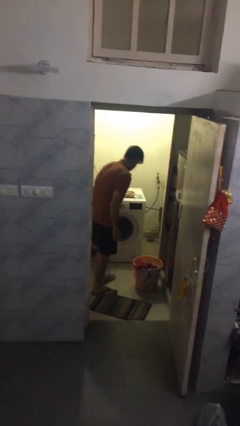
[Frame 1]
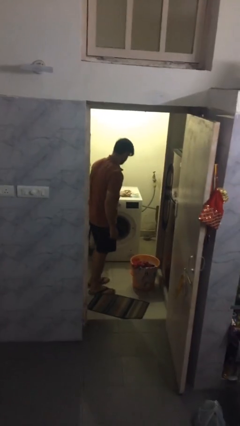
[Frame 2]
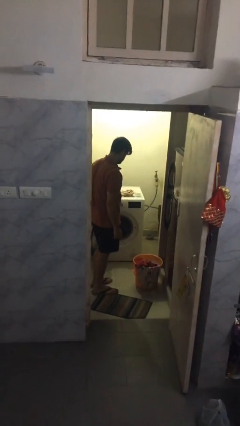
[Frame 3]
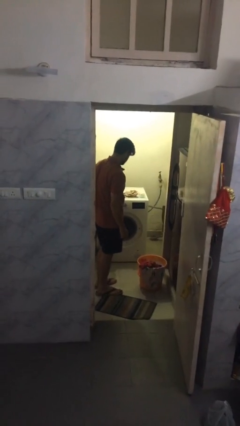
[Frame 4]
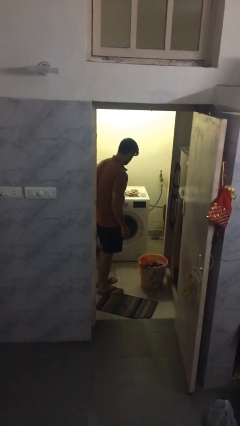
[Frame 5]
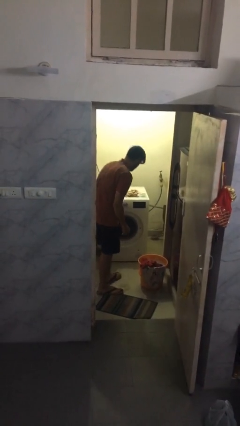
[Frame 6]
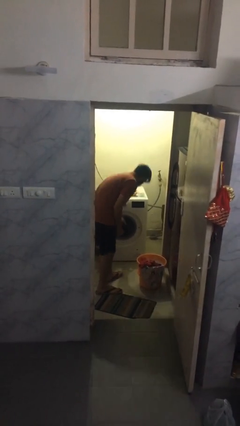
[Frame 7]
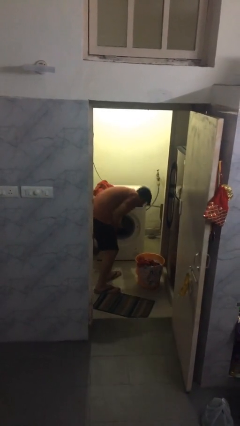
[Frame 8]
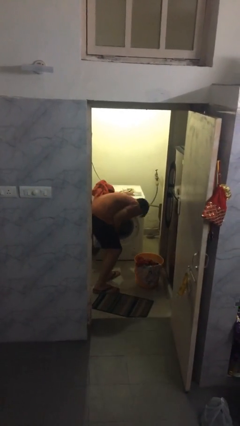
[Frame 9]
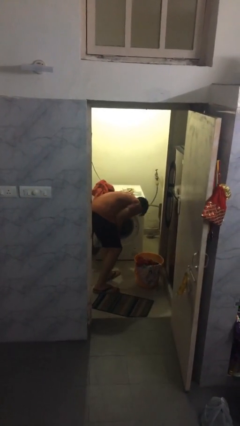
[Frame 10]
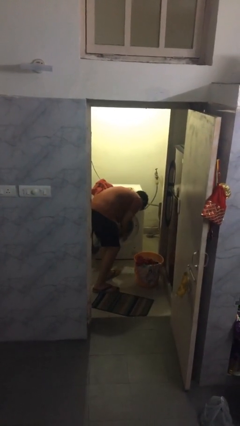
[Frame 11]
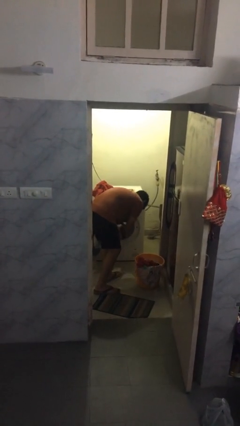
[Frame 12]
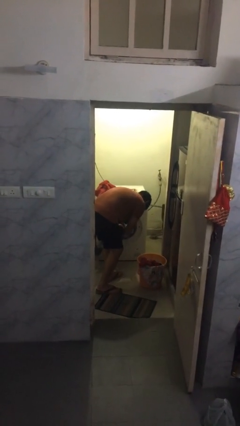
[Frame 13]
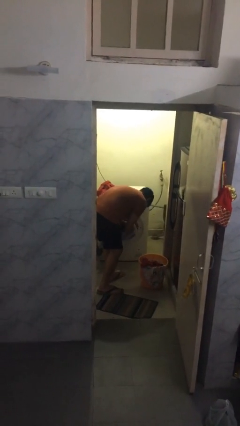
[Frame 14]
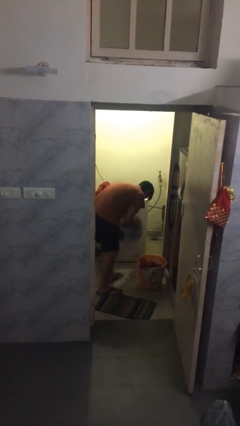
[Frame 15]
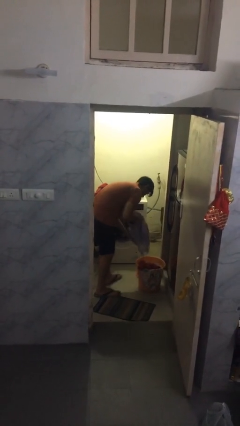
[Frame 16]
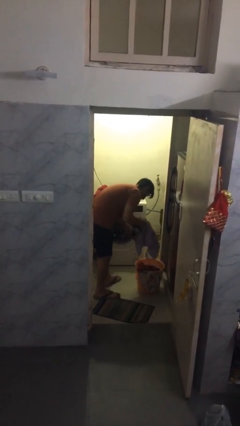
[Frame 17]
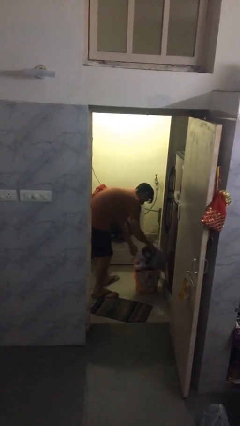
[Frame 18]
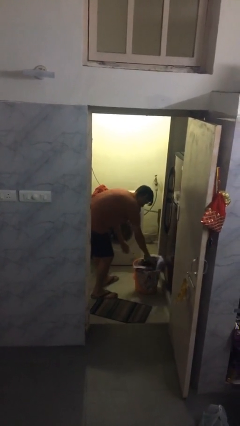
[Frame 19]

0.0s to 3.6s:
person unloads dryer

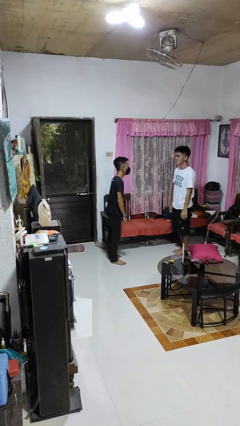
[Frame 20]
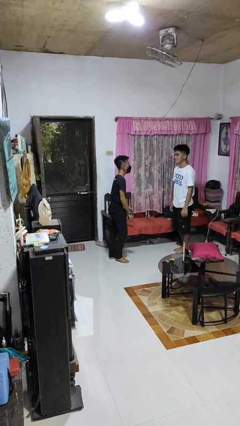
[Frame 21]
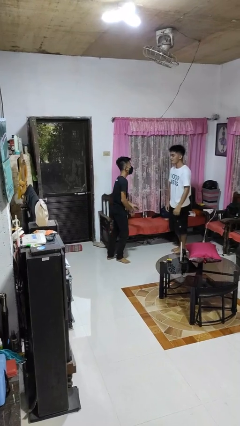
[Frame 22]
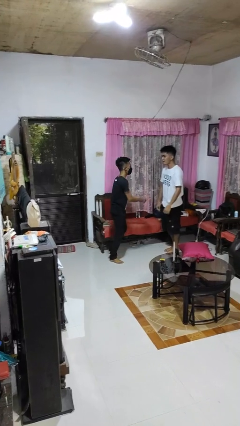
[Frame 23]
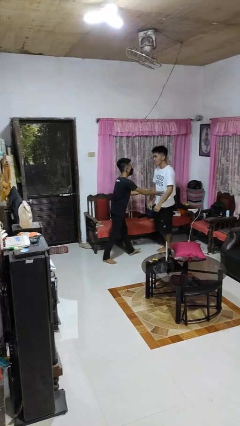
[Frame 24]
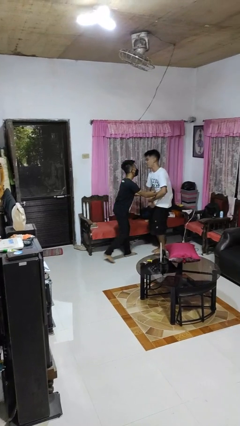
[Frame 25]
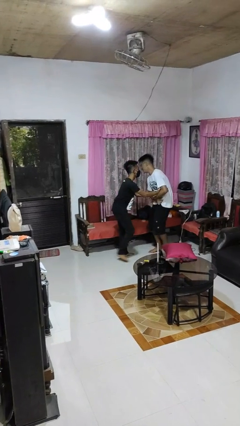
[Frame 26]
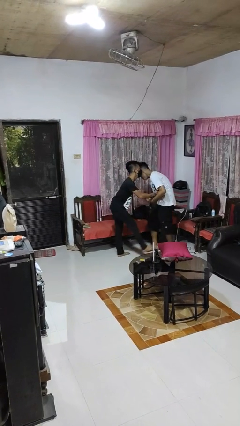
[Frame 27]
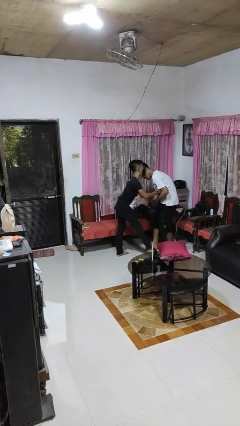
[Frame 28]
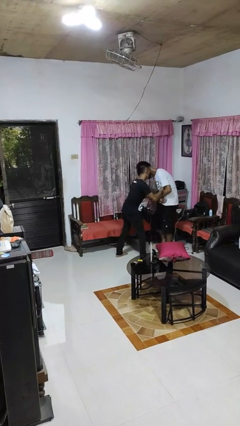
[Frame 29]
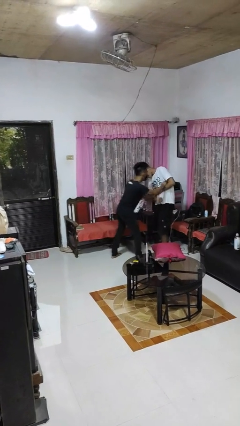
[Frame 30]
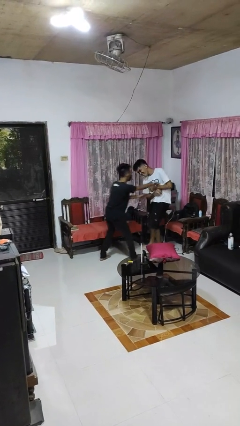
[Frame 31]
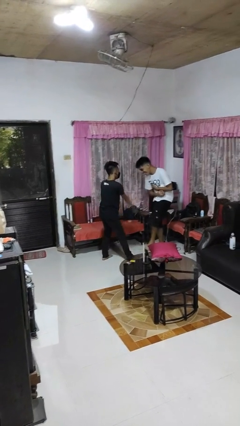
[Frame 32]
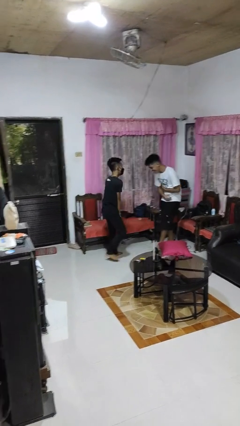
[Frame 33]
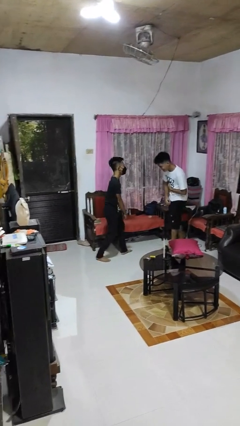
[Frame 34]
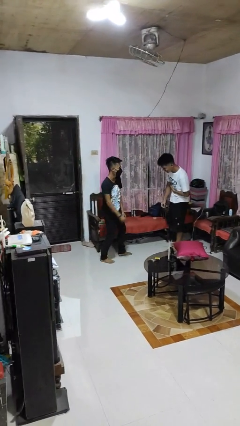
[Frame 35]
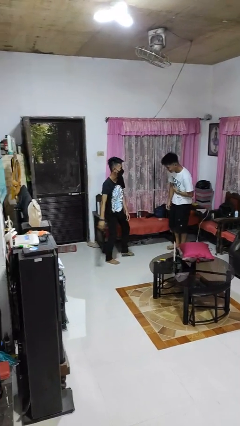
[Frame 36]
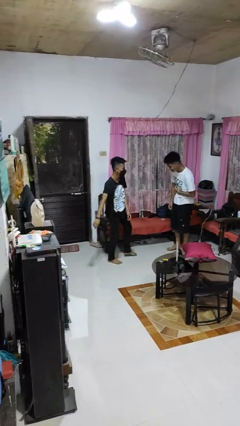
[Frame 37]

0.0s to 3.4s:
person tickles person

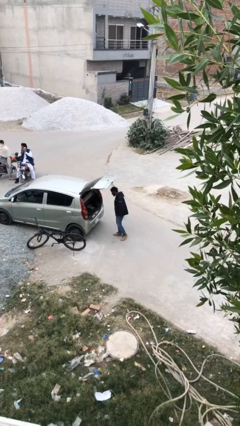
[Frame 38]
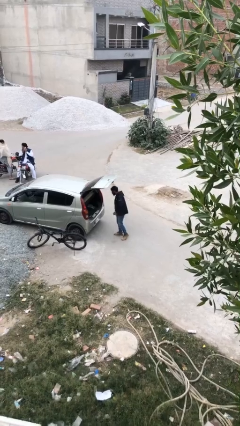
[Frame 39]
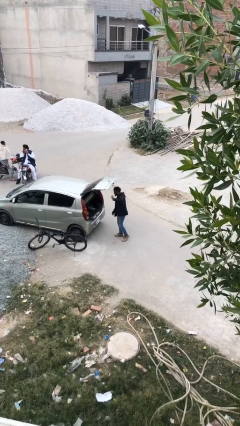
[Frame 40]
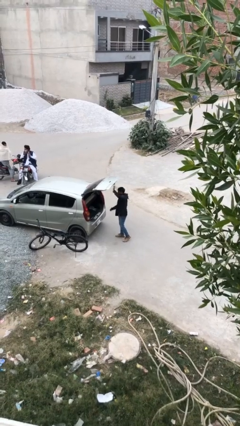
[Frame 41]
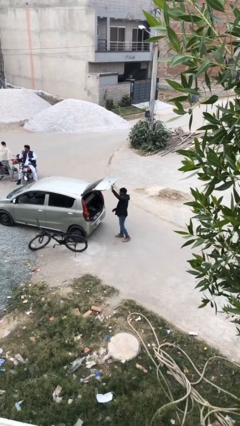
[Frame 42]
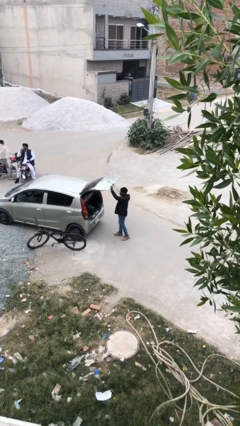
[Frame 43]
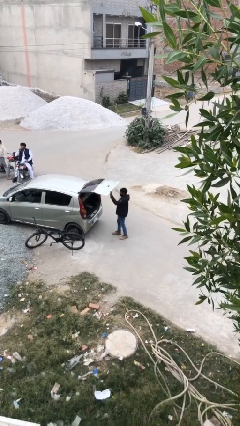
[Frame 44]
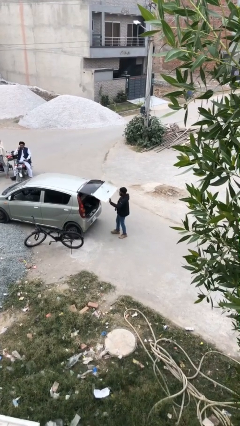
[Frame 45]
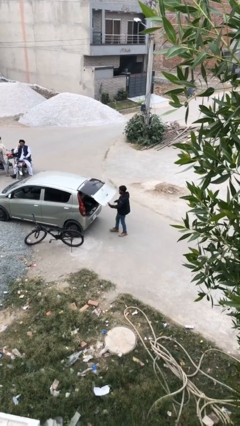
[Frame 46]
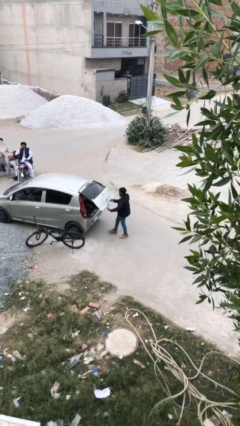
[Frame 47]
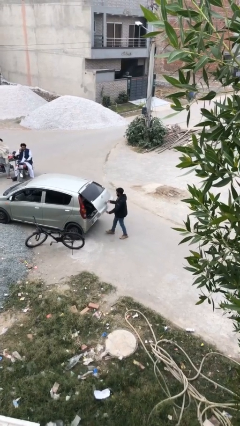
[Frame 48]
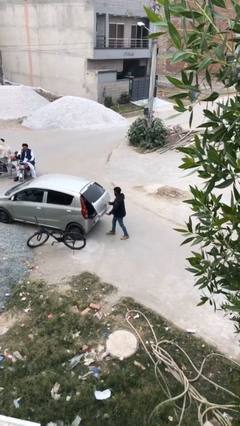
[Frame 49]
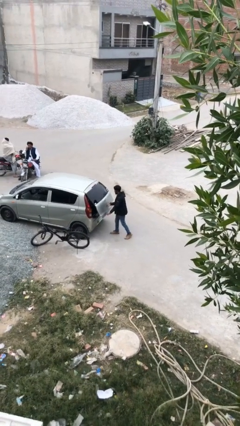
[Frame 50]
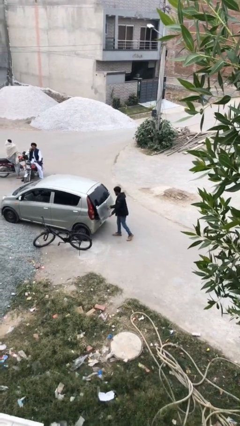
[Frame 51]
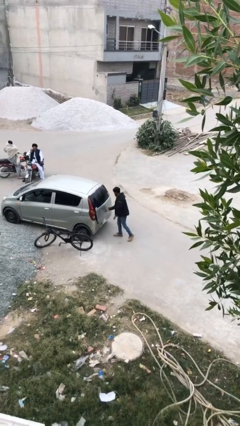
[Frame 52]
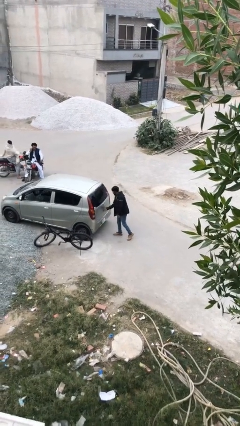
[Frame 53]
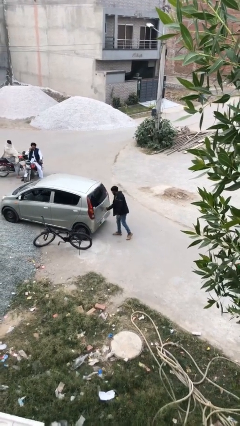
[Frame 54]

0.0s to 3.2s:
person closes car trunk

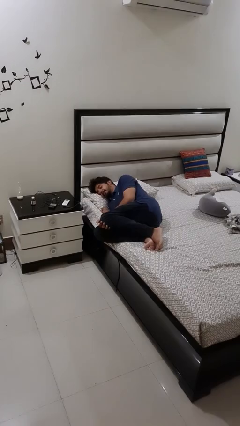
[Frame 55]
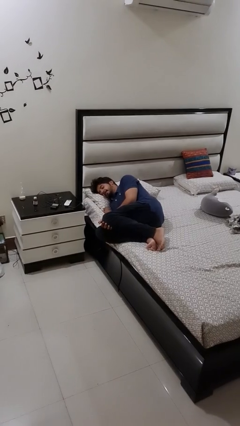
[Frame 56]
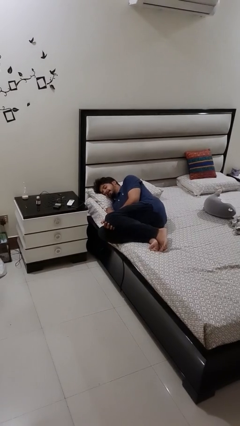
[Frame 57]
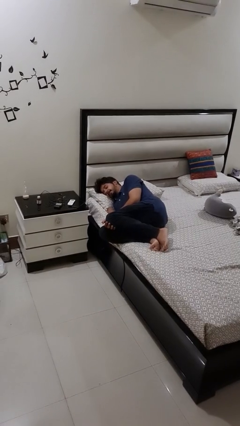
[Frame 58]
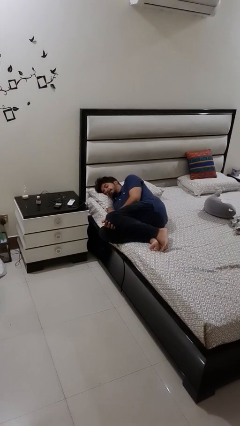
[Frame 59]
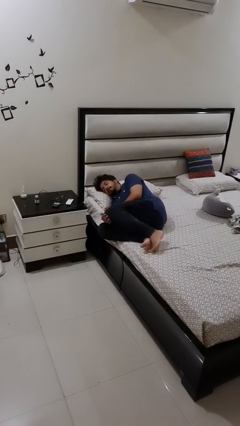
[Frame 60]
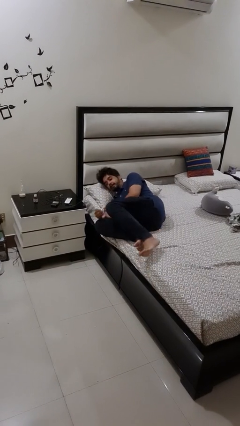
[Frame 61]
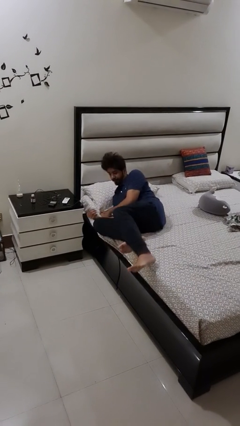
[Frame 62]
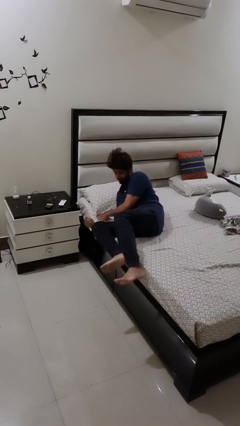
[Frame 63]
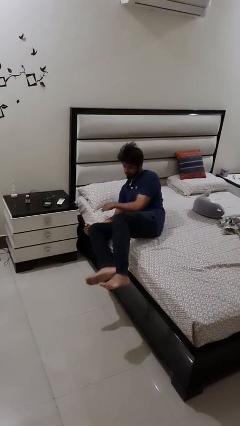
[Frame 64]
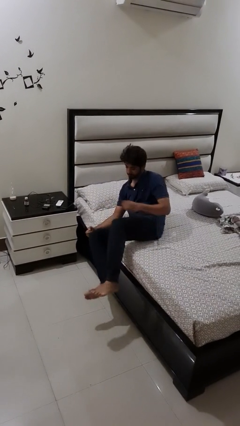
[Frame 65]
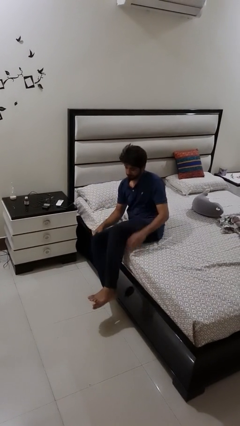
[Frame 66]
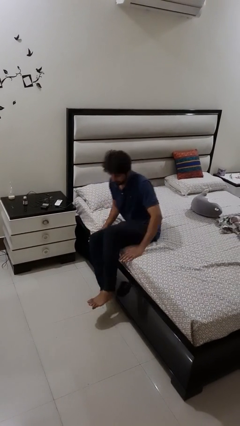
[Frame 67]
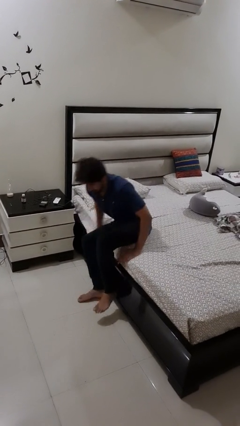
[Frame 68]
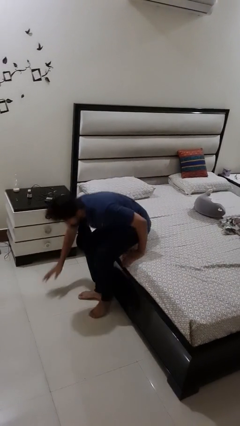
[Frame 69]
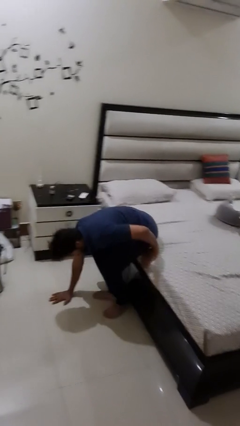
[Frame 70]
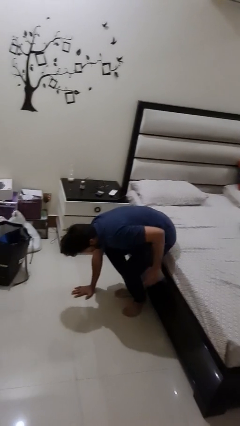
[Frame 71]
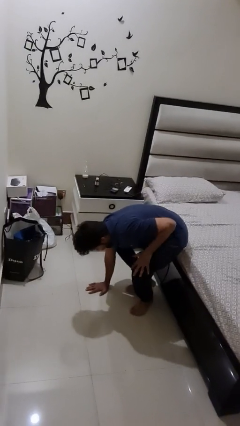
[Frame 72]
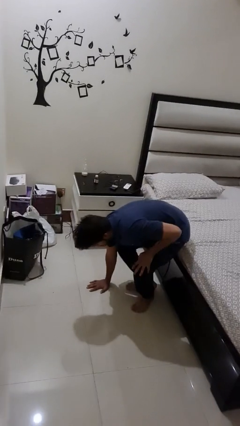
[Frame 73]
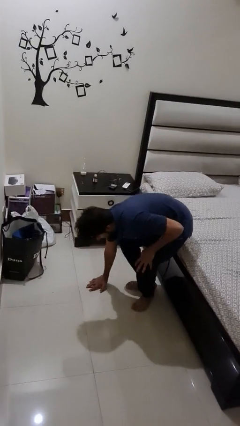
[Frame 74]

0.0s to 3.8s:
person falls from bed

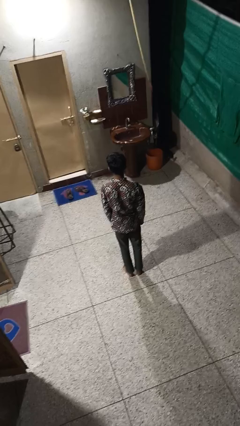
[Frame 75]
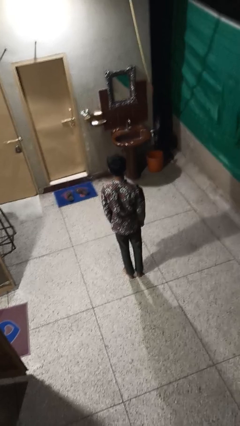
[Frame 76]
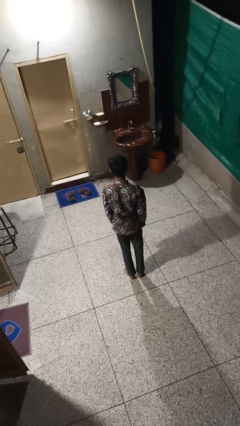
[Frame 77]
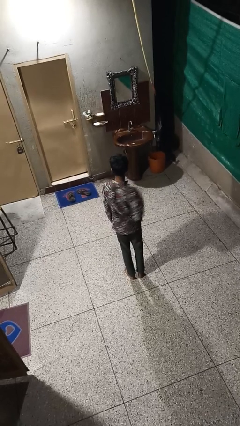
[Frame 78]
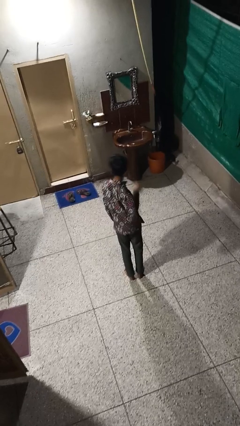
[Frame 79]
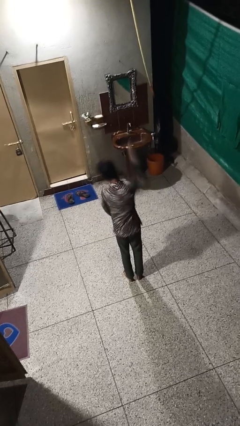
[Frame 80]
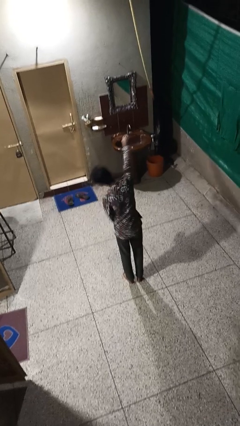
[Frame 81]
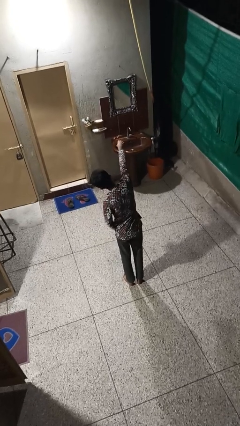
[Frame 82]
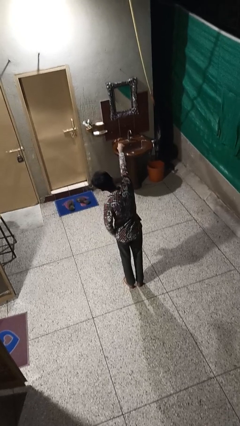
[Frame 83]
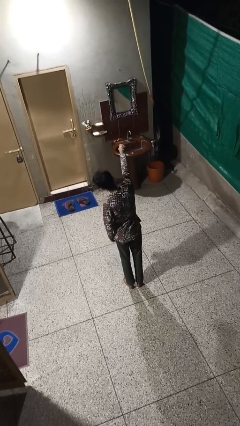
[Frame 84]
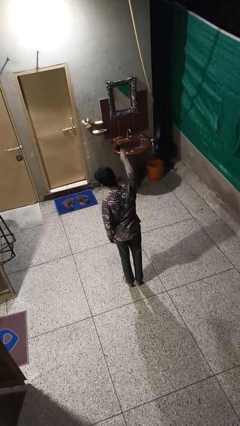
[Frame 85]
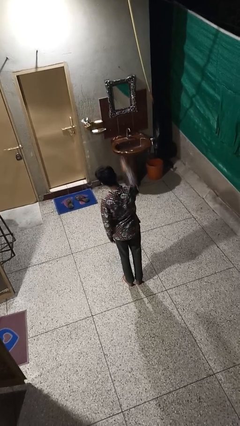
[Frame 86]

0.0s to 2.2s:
person punches

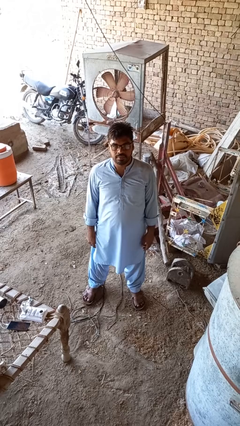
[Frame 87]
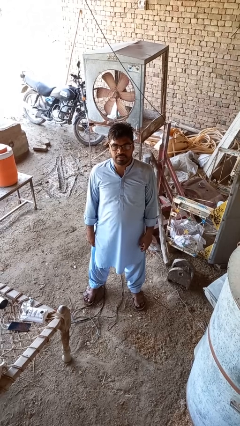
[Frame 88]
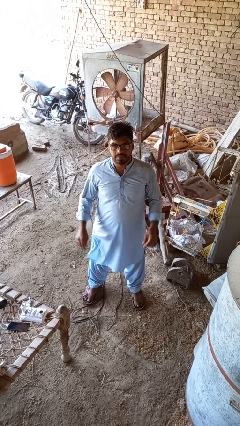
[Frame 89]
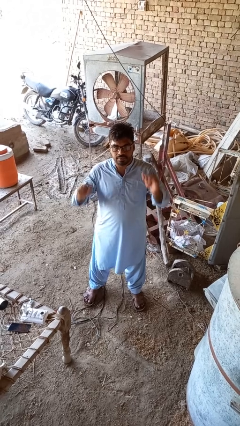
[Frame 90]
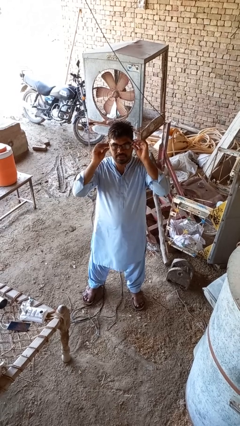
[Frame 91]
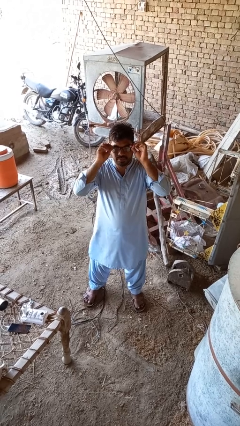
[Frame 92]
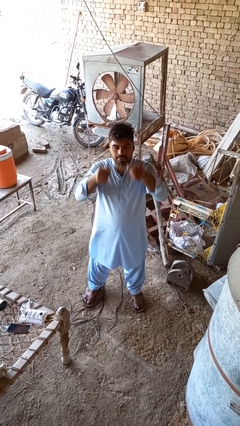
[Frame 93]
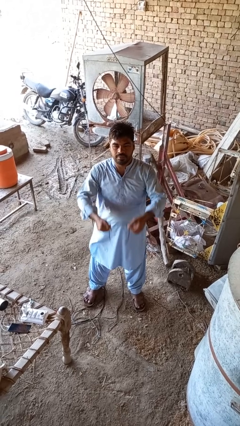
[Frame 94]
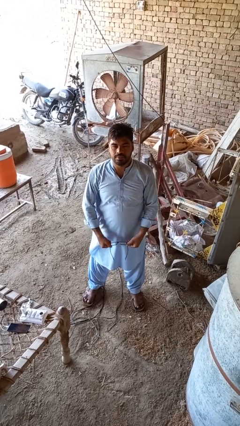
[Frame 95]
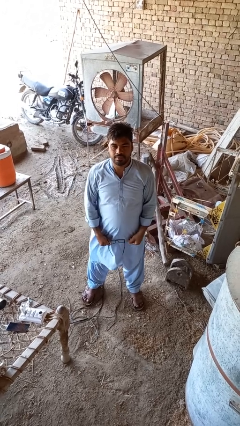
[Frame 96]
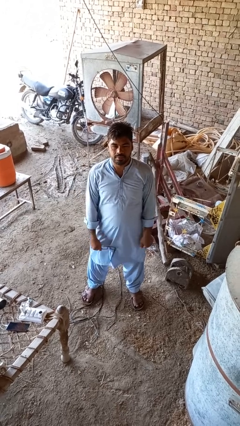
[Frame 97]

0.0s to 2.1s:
person takes off glasses
